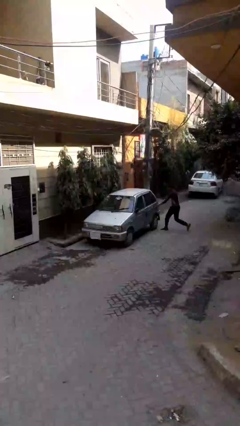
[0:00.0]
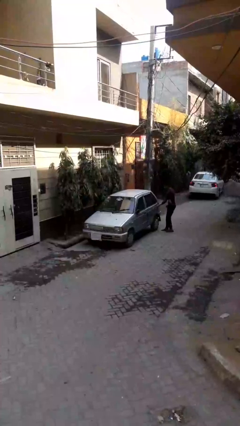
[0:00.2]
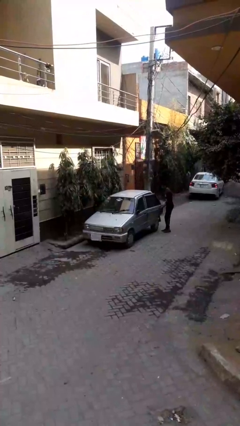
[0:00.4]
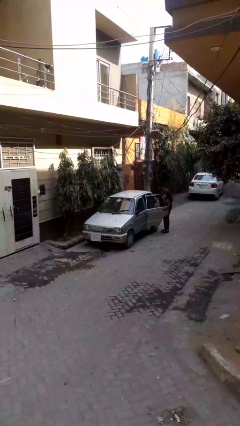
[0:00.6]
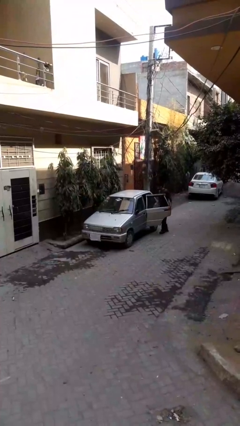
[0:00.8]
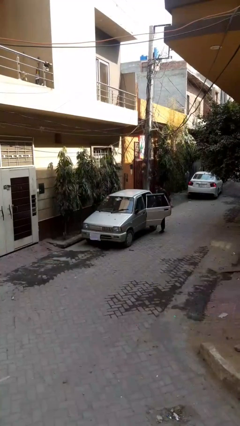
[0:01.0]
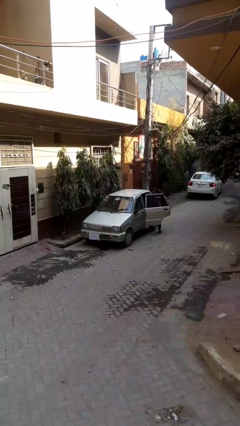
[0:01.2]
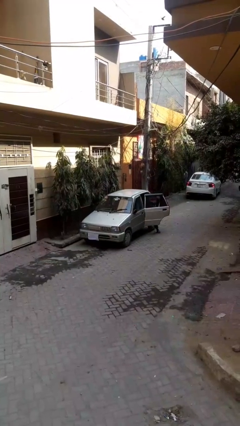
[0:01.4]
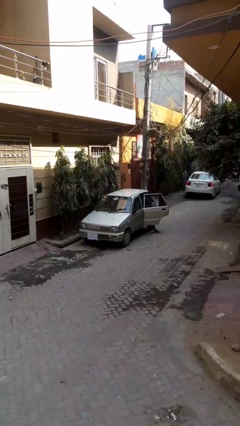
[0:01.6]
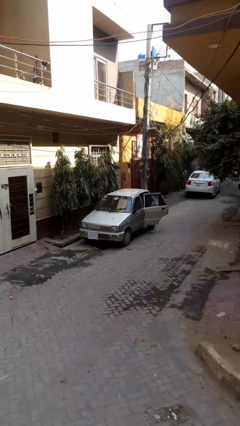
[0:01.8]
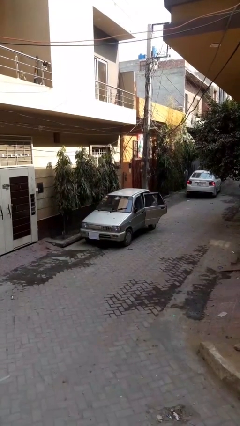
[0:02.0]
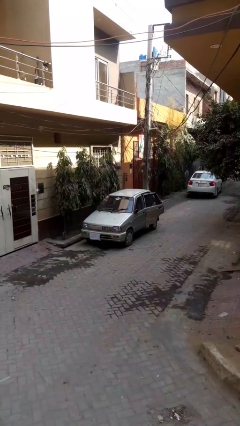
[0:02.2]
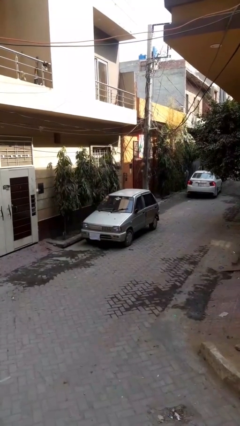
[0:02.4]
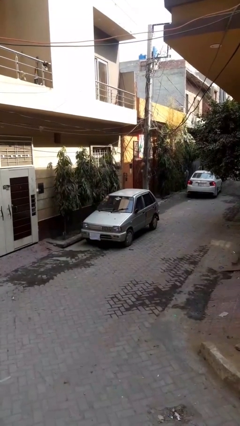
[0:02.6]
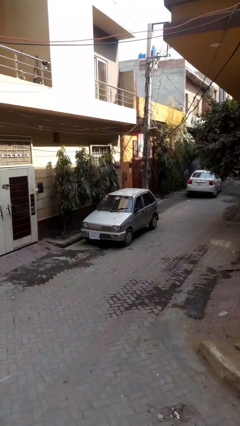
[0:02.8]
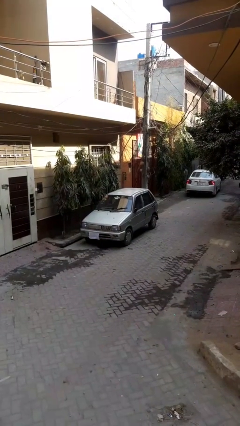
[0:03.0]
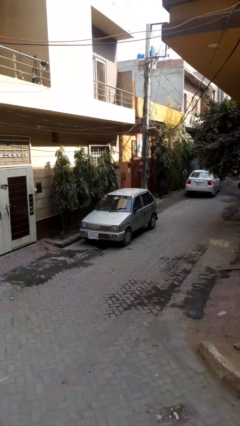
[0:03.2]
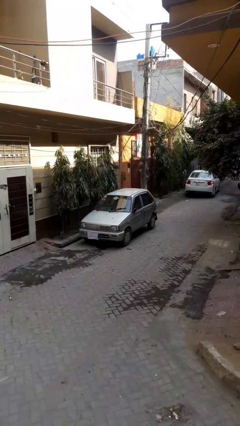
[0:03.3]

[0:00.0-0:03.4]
car picks up person

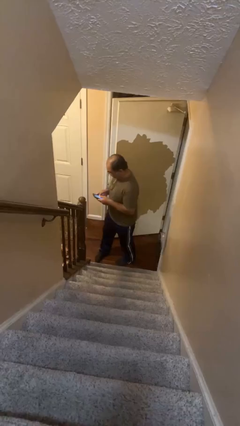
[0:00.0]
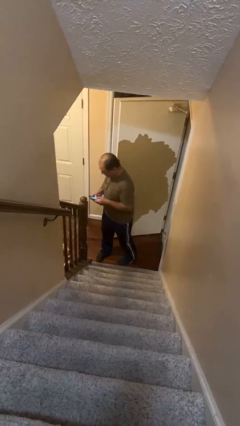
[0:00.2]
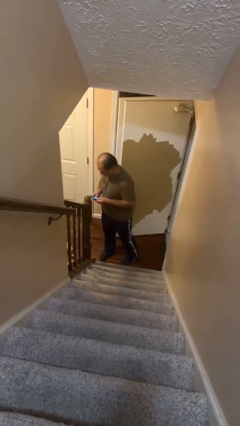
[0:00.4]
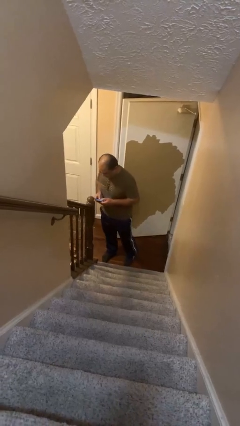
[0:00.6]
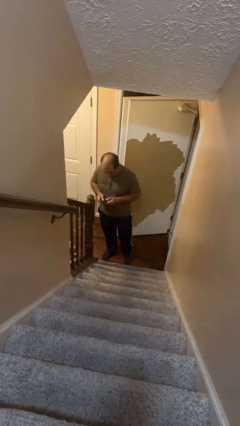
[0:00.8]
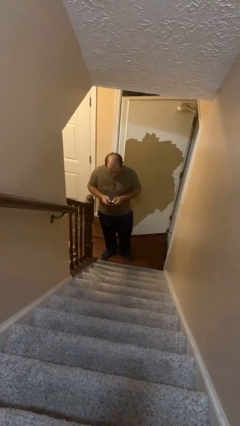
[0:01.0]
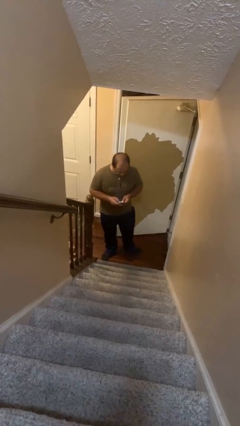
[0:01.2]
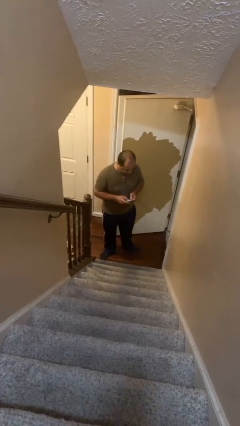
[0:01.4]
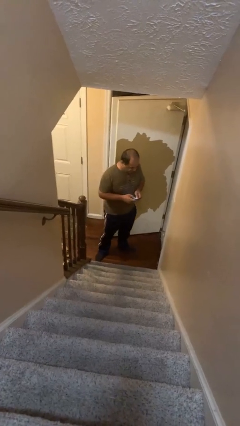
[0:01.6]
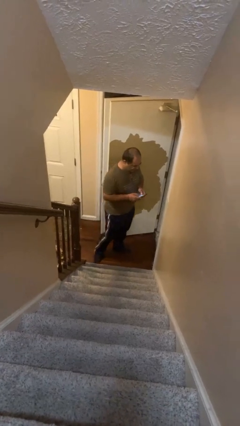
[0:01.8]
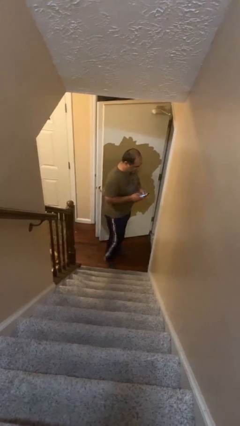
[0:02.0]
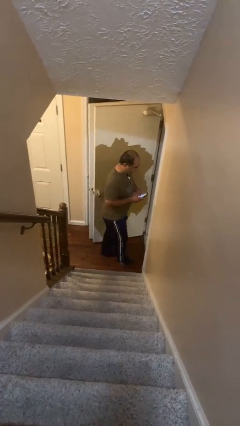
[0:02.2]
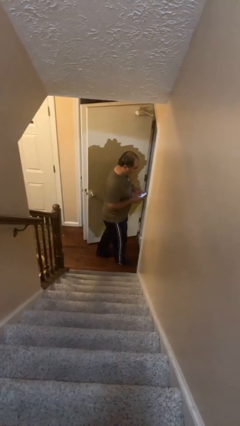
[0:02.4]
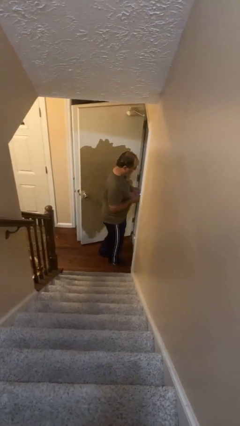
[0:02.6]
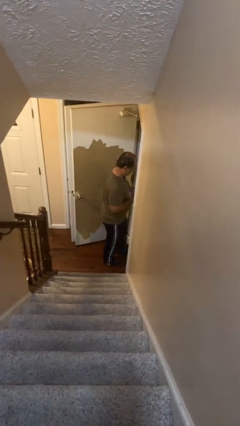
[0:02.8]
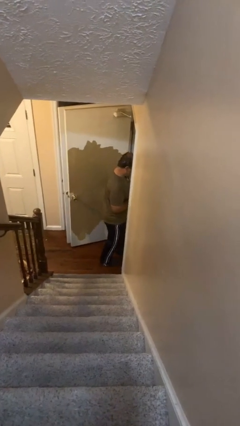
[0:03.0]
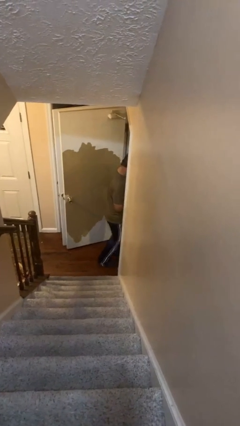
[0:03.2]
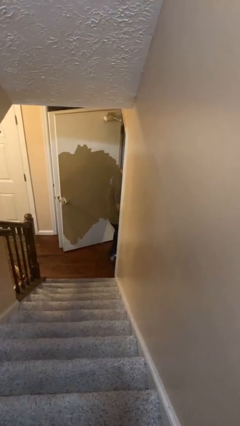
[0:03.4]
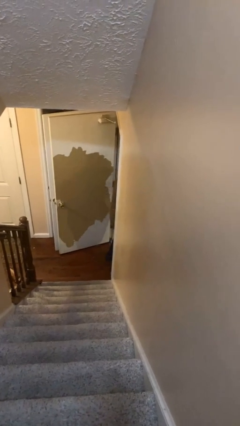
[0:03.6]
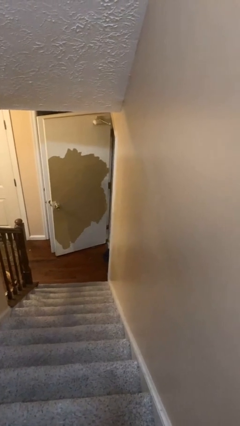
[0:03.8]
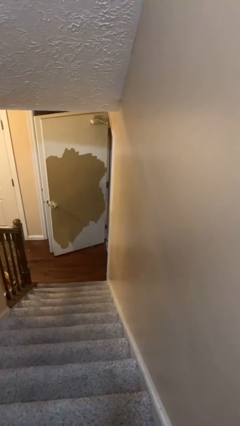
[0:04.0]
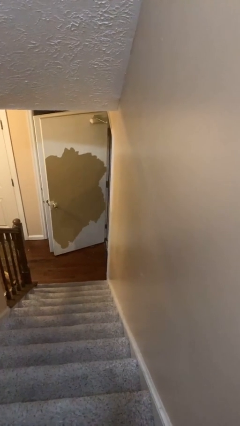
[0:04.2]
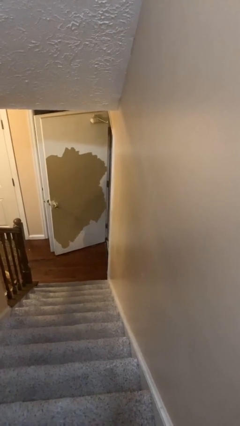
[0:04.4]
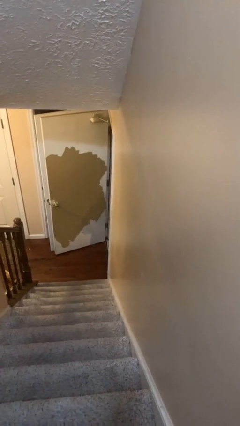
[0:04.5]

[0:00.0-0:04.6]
person exits scene through structure

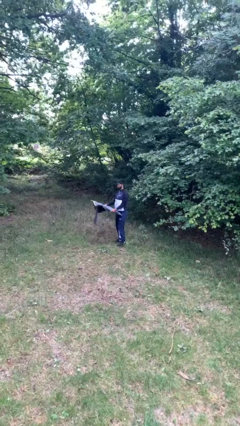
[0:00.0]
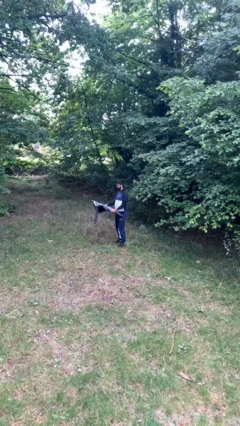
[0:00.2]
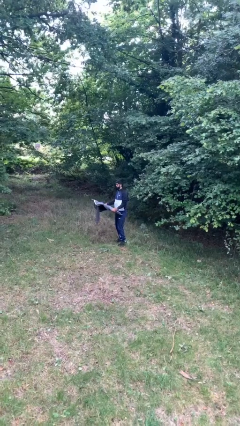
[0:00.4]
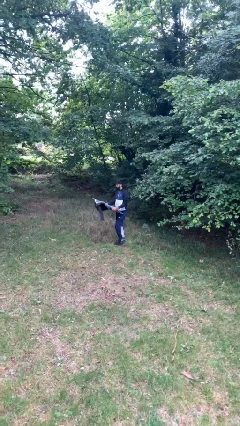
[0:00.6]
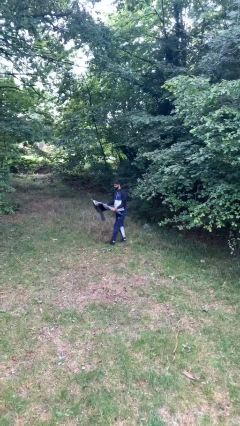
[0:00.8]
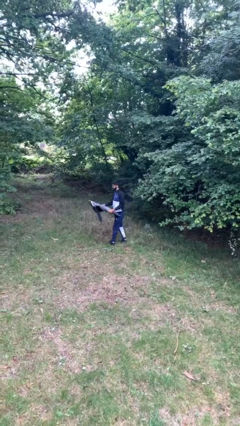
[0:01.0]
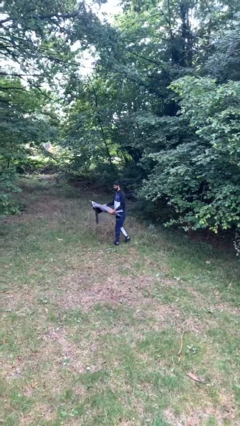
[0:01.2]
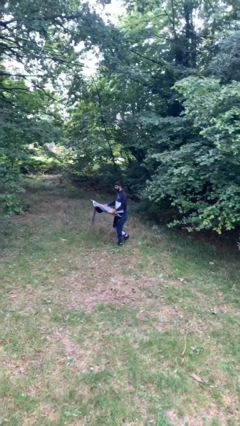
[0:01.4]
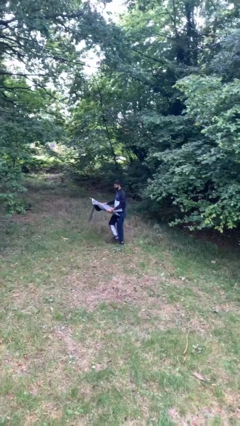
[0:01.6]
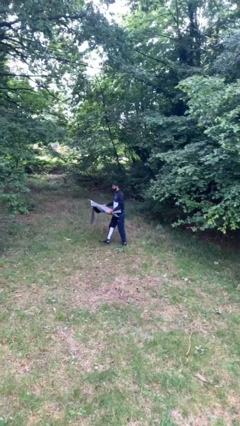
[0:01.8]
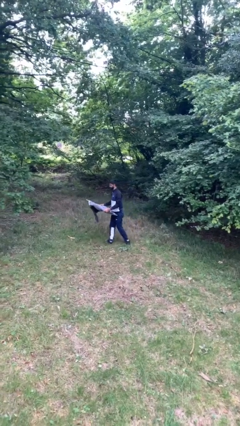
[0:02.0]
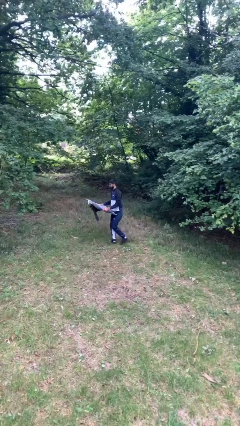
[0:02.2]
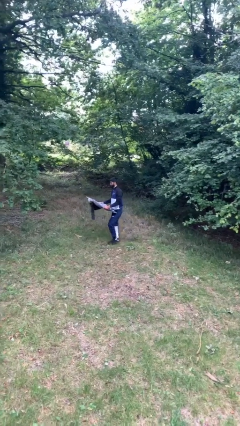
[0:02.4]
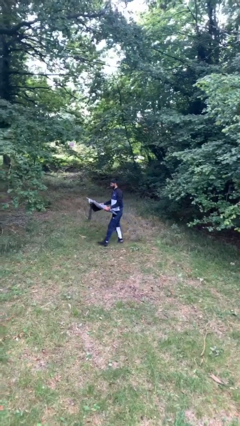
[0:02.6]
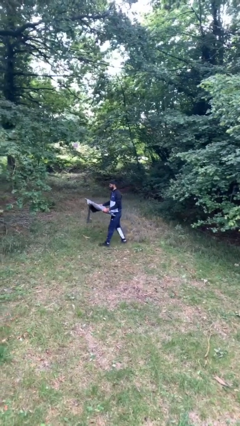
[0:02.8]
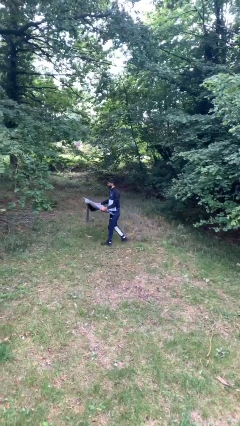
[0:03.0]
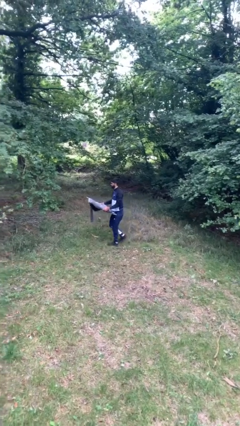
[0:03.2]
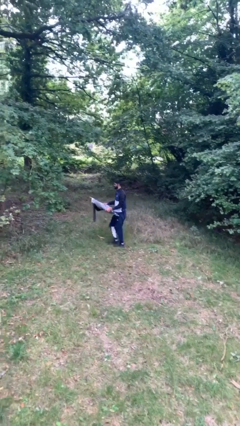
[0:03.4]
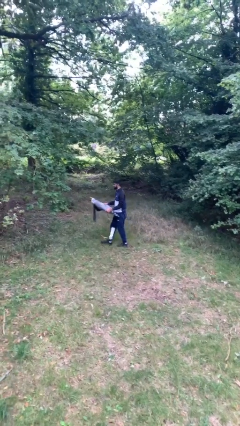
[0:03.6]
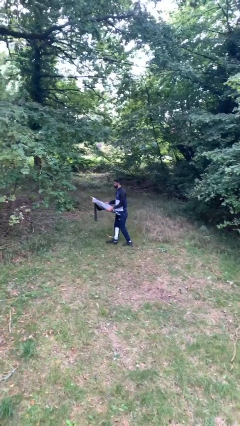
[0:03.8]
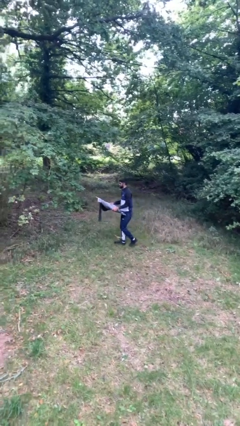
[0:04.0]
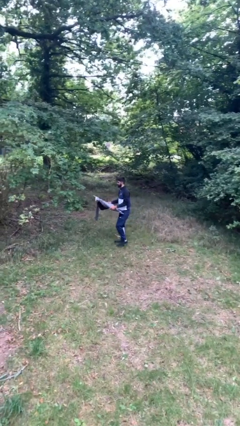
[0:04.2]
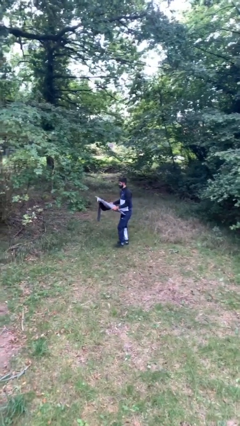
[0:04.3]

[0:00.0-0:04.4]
person carries heavy object

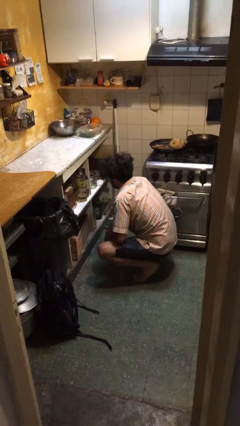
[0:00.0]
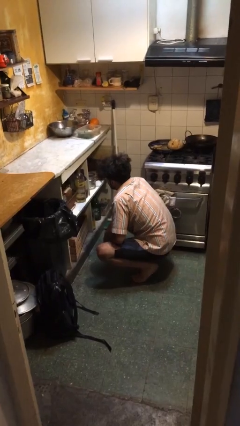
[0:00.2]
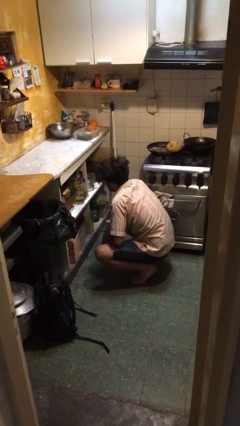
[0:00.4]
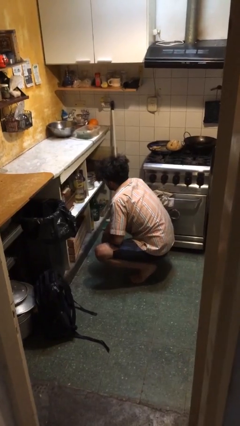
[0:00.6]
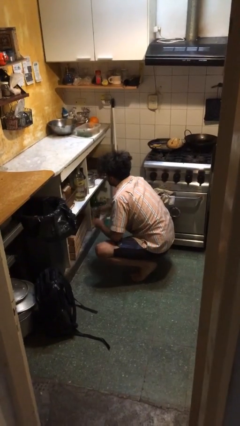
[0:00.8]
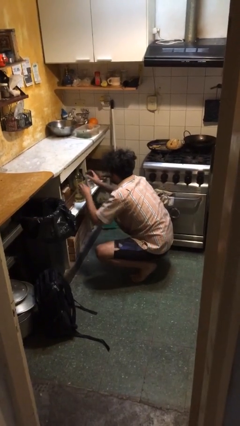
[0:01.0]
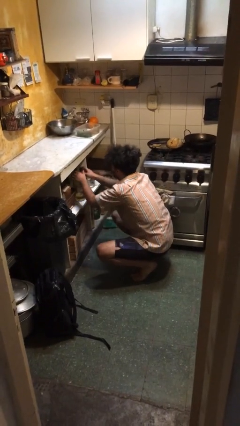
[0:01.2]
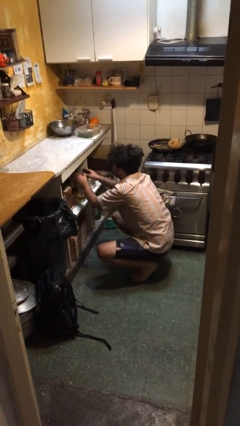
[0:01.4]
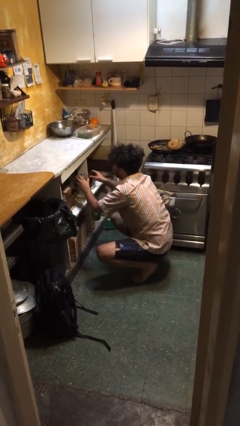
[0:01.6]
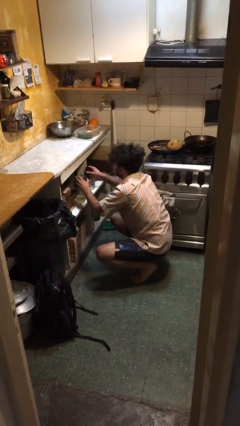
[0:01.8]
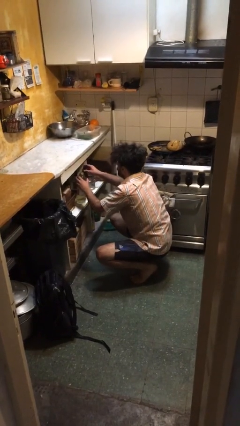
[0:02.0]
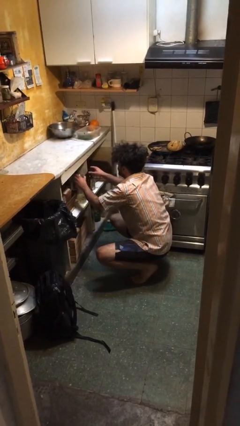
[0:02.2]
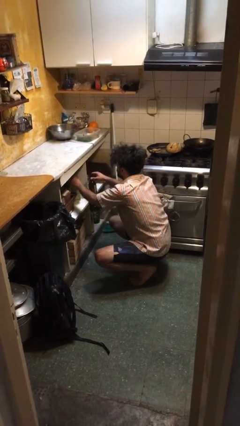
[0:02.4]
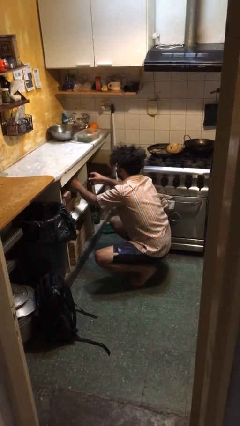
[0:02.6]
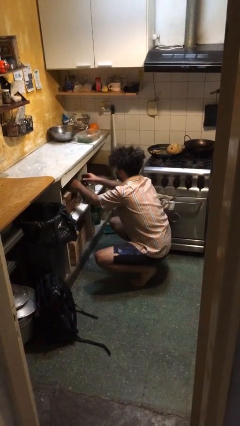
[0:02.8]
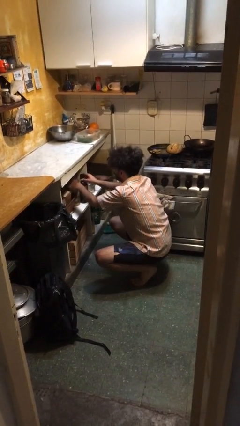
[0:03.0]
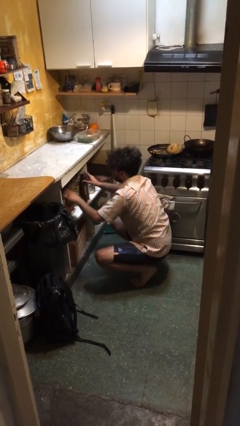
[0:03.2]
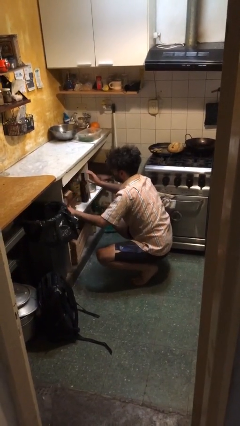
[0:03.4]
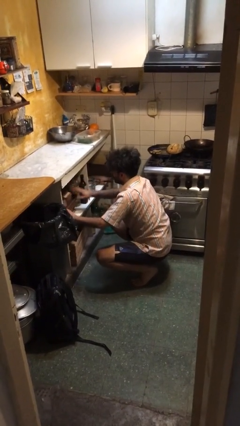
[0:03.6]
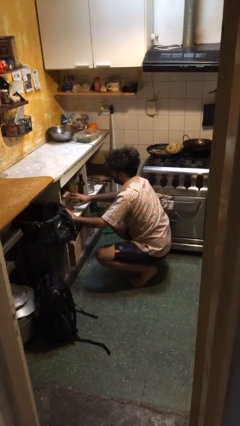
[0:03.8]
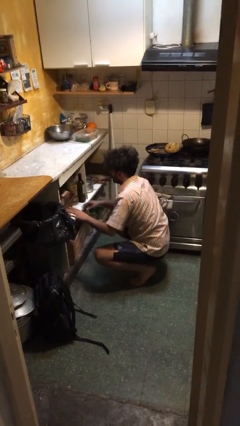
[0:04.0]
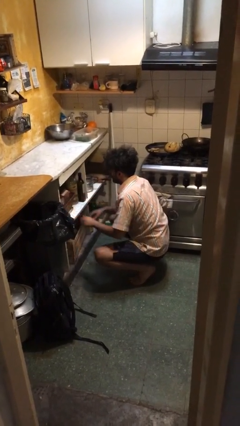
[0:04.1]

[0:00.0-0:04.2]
person searches in cabinet

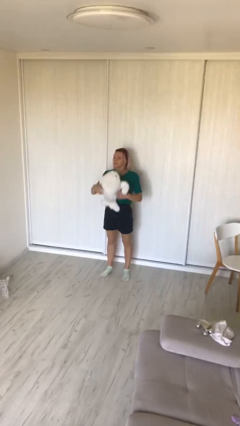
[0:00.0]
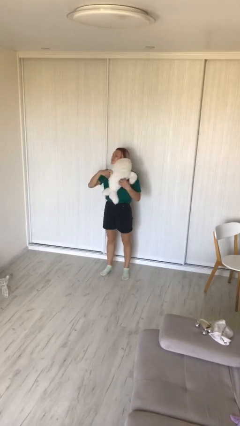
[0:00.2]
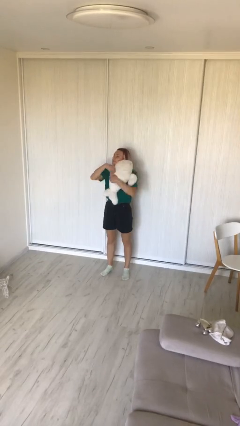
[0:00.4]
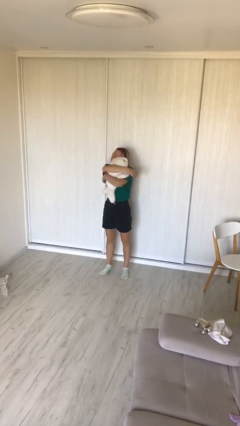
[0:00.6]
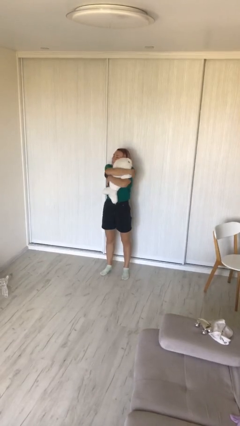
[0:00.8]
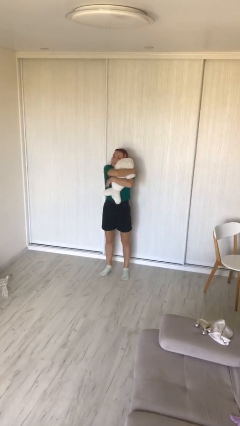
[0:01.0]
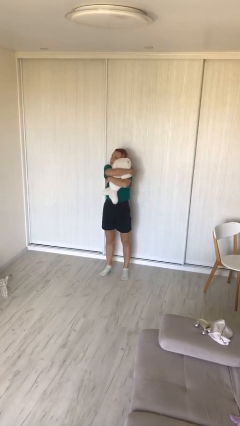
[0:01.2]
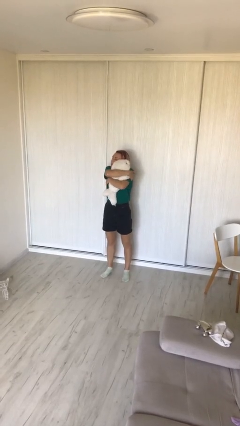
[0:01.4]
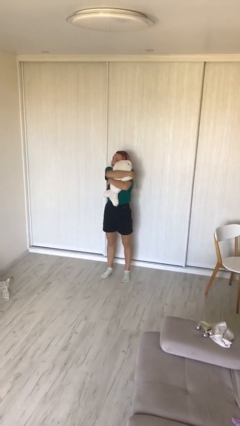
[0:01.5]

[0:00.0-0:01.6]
person hugs stuffed animal
